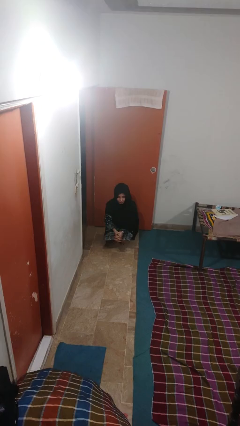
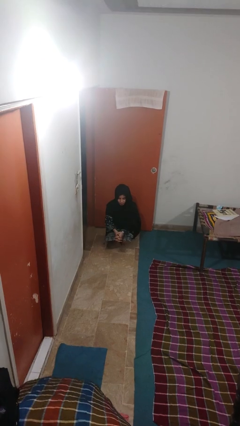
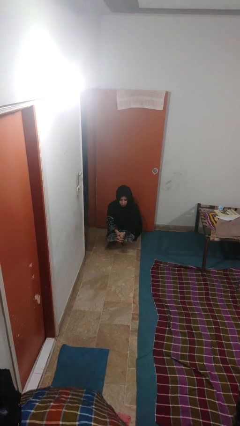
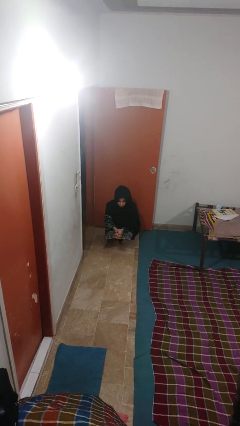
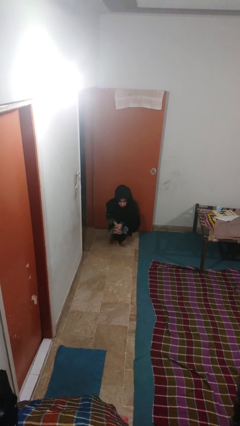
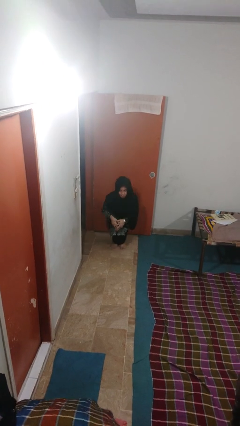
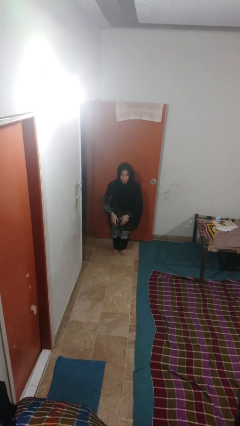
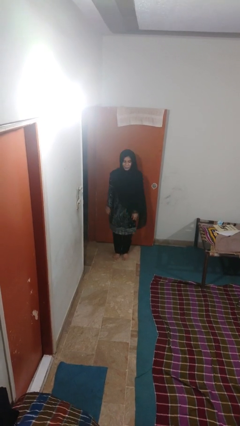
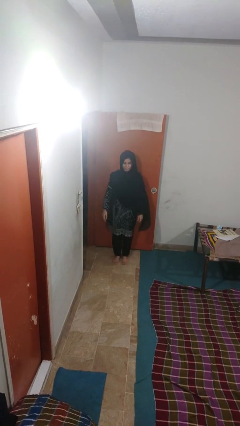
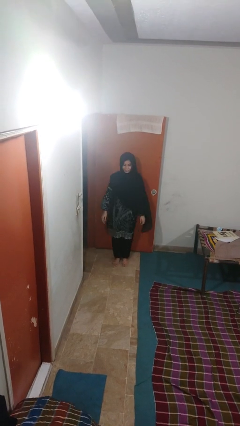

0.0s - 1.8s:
person stands up

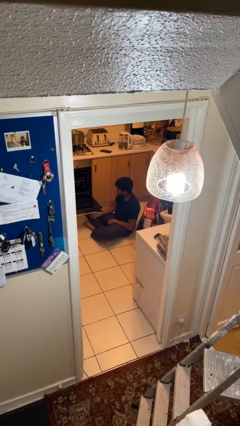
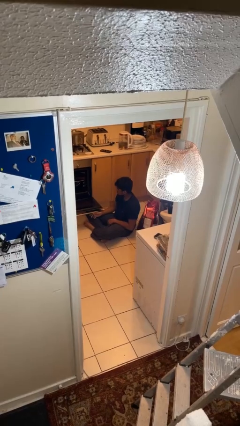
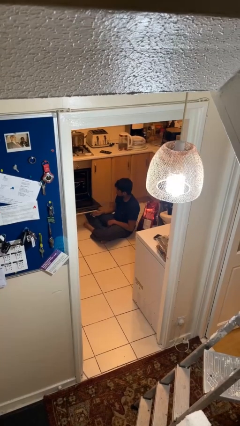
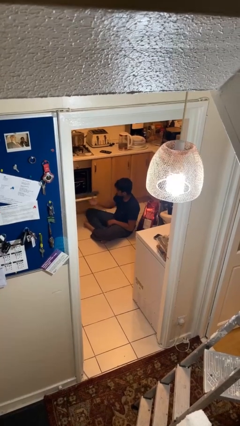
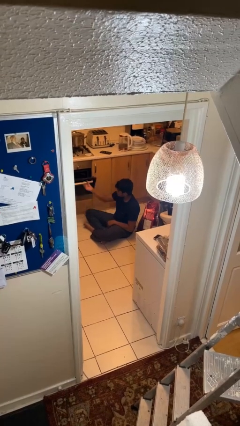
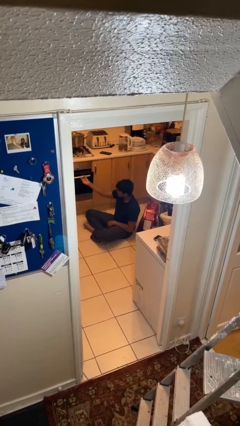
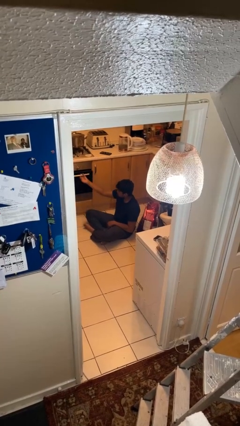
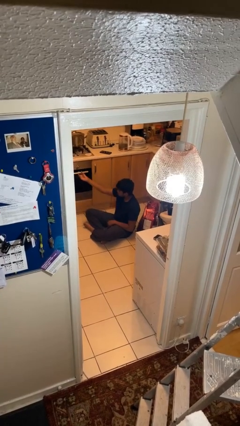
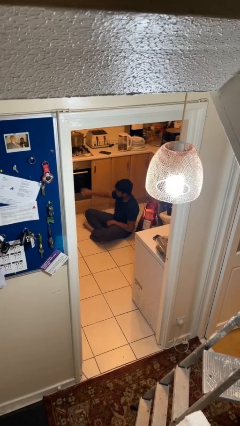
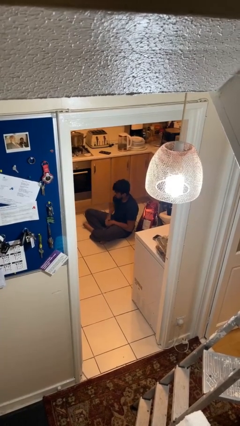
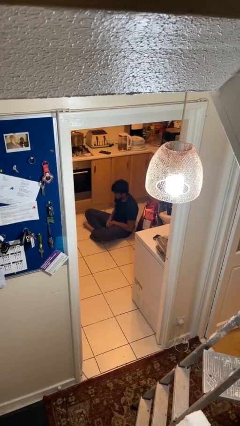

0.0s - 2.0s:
person closes oven door

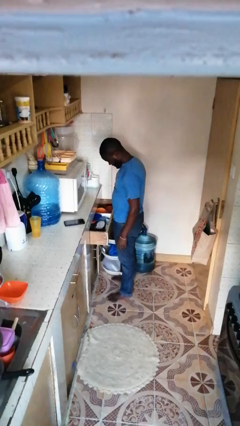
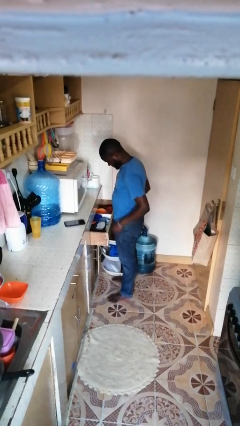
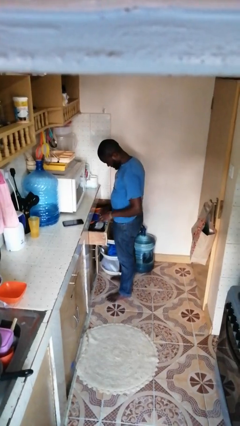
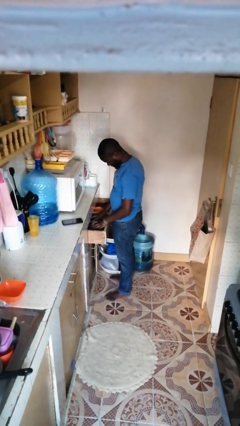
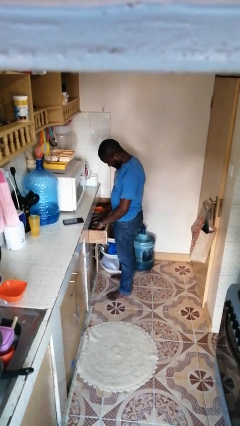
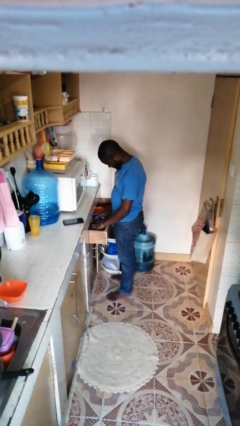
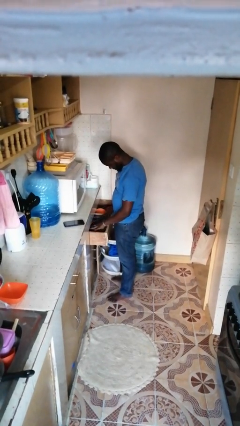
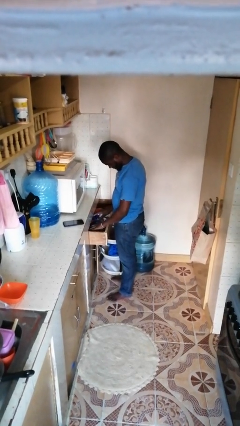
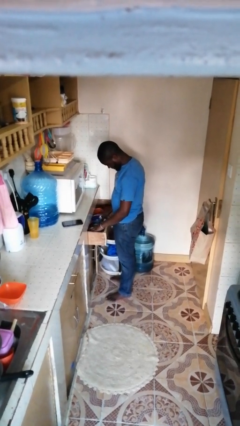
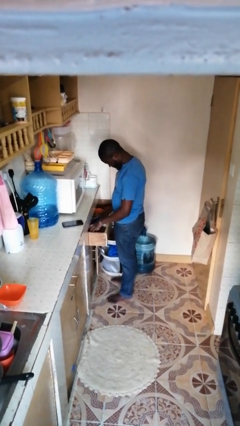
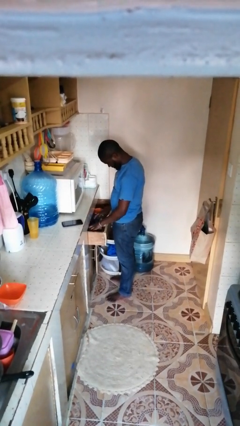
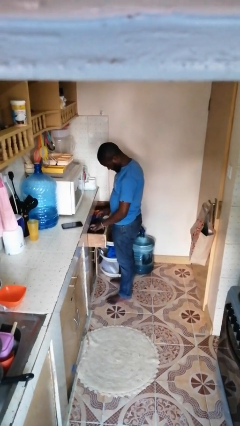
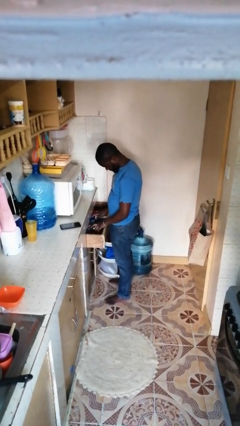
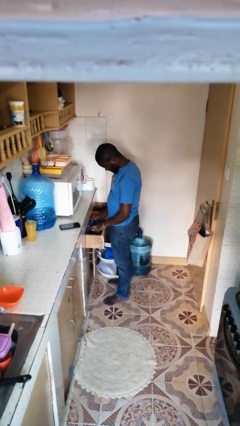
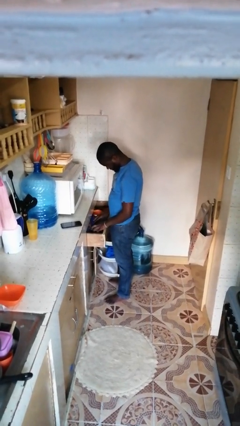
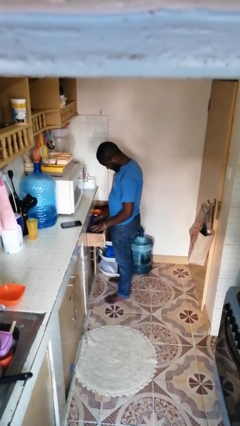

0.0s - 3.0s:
person searches in kitchen drawer

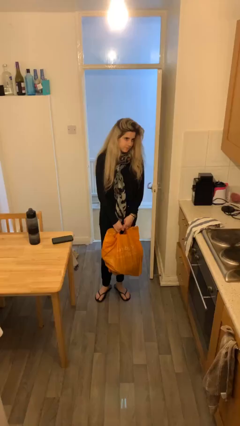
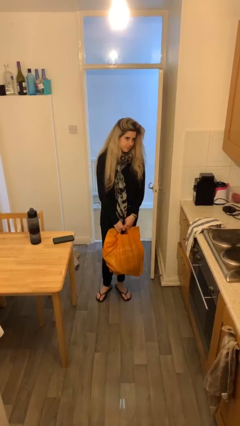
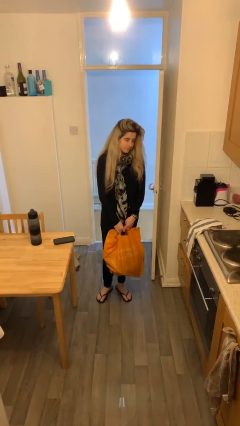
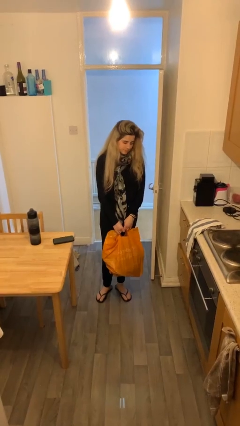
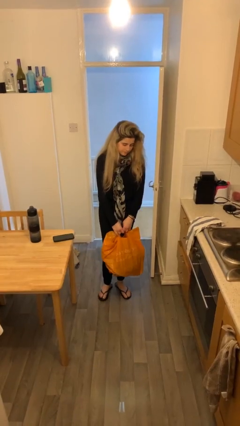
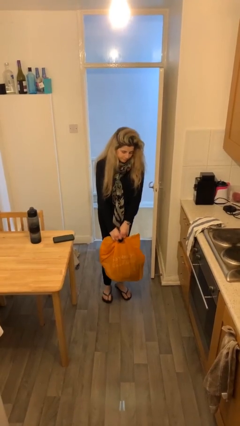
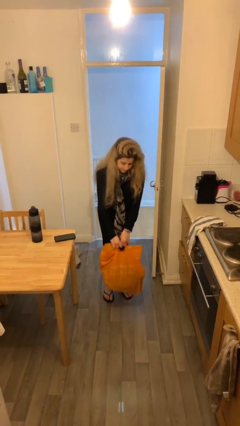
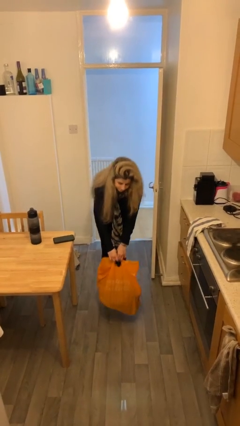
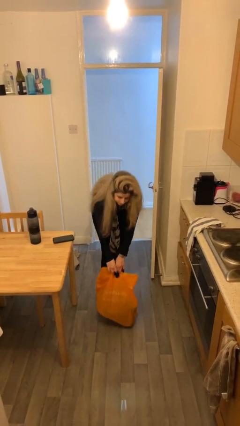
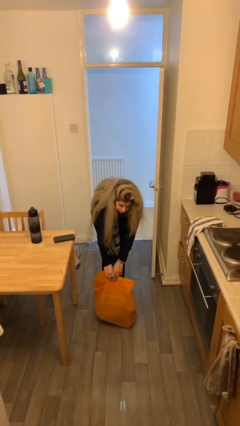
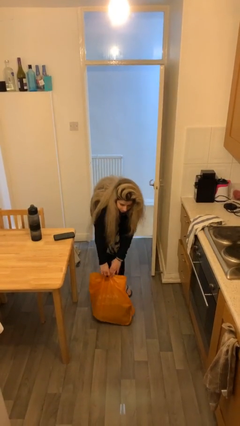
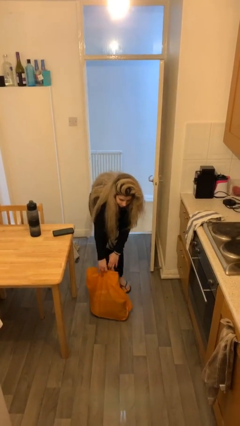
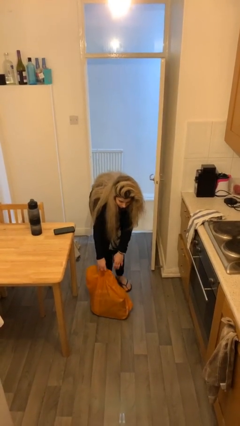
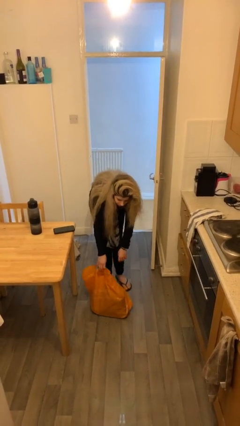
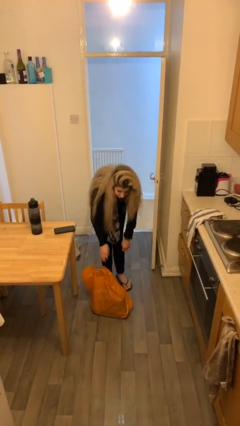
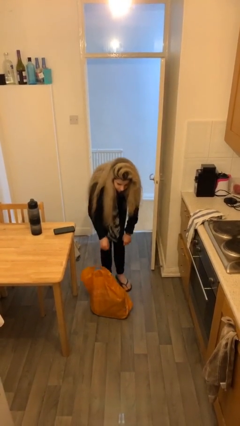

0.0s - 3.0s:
person puts down object on floor

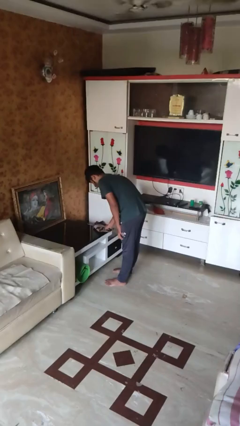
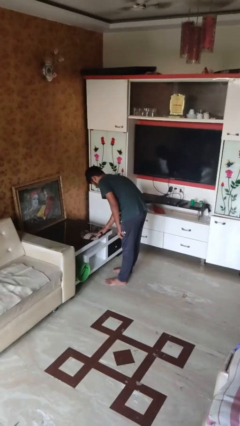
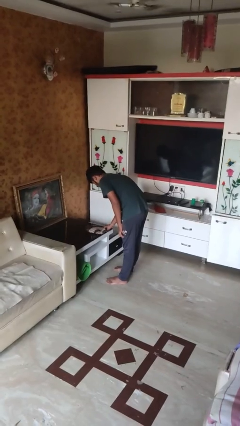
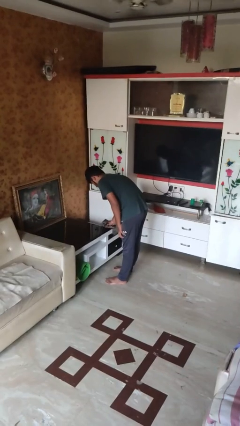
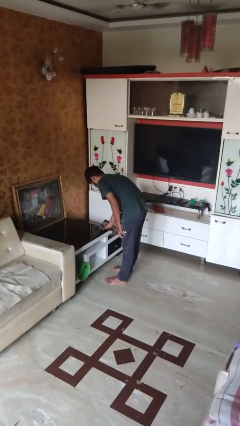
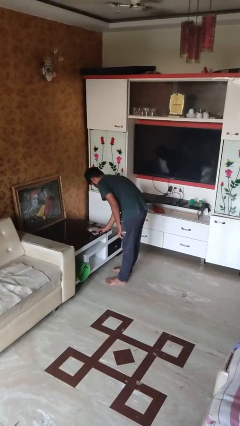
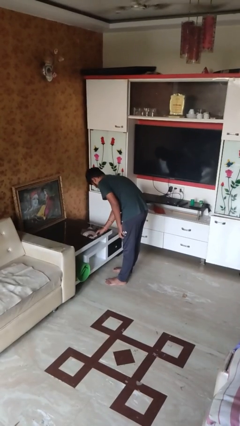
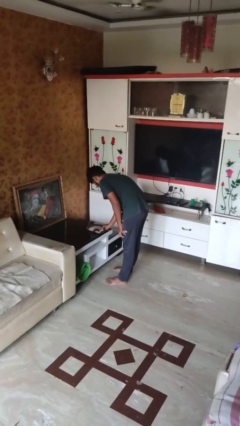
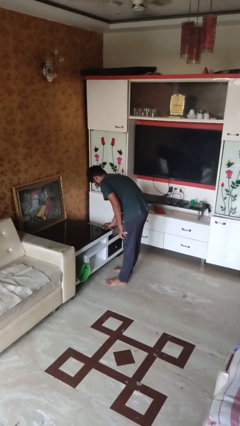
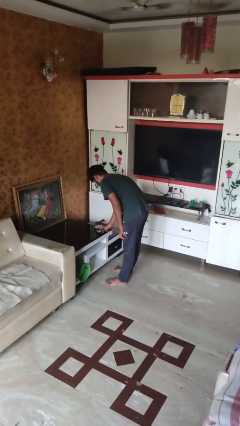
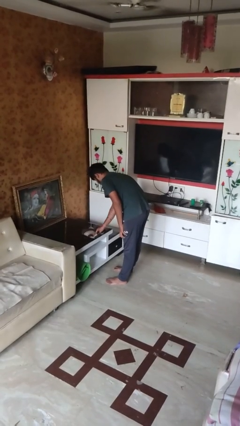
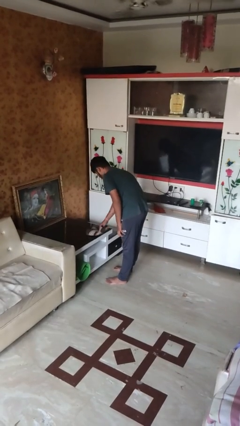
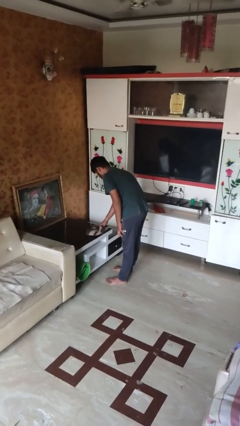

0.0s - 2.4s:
person cleans table with rag

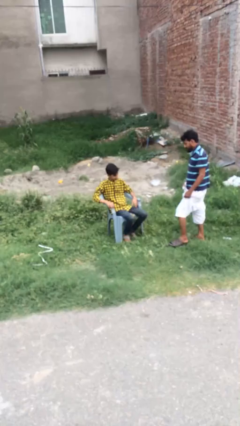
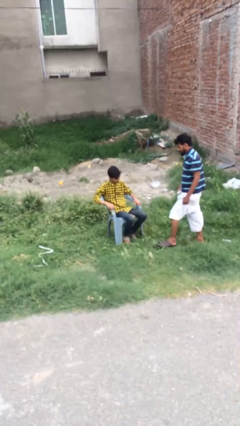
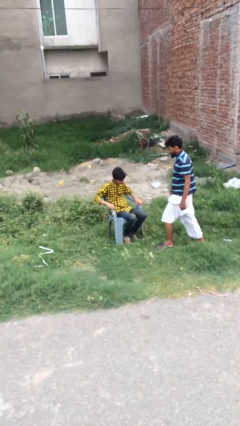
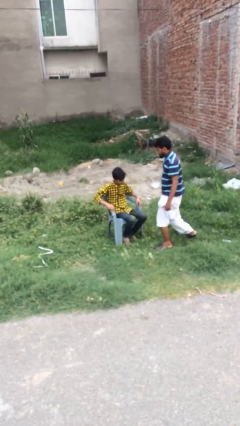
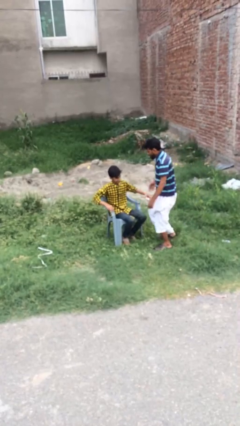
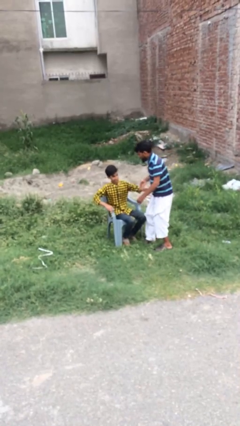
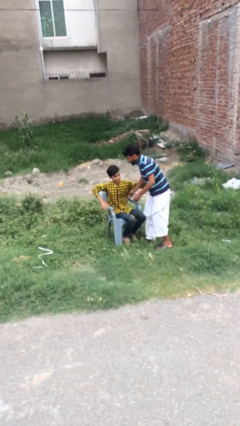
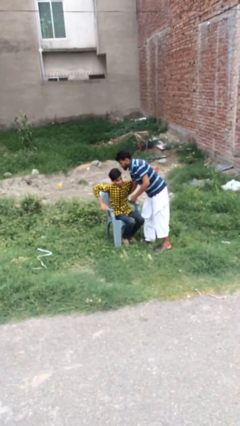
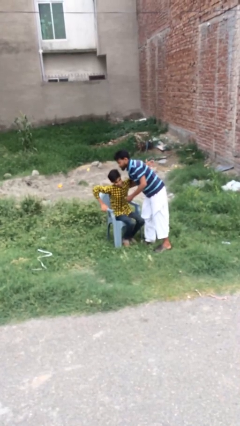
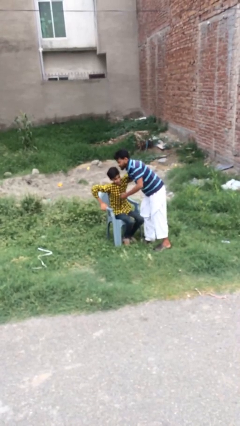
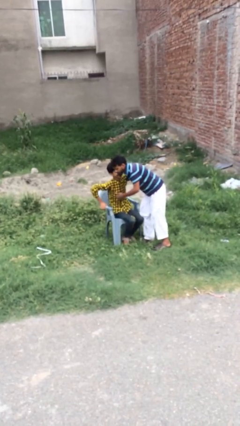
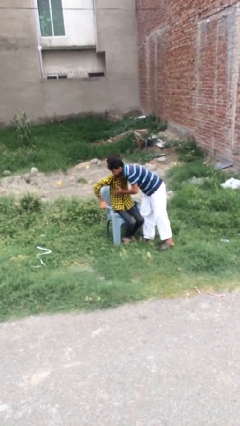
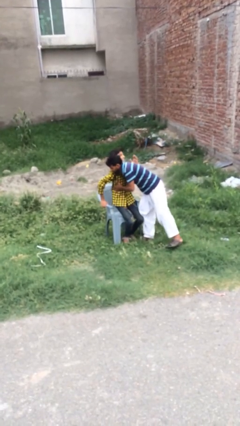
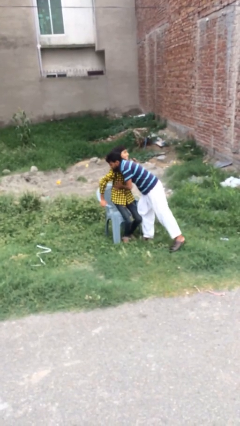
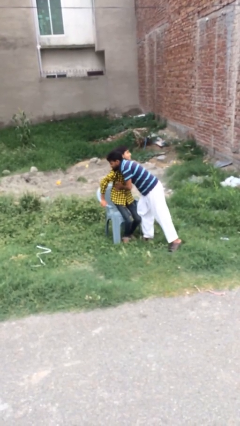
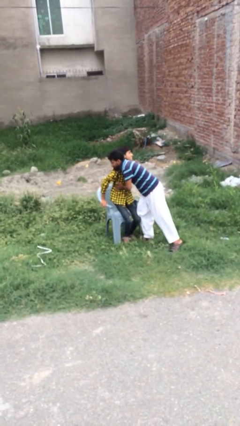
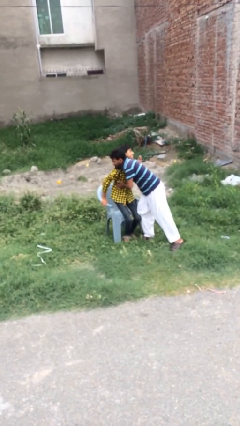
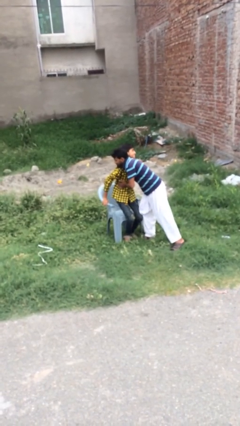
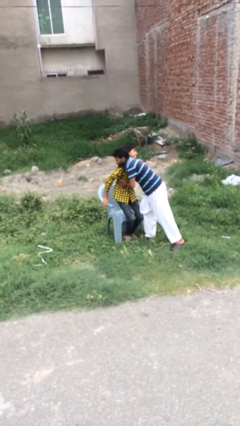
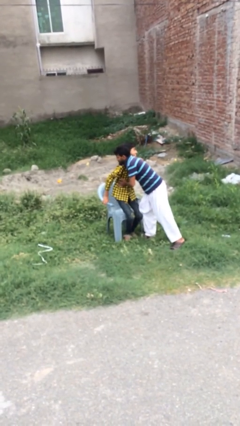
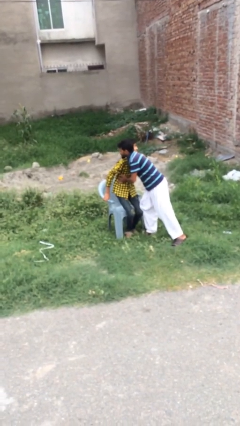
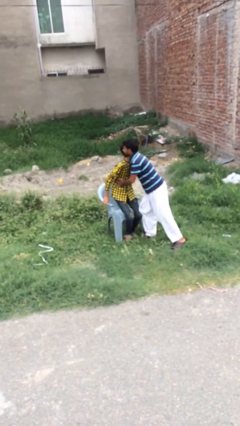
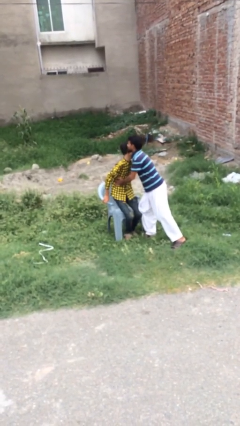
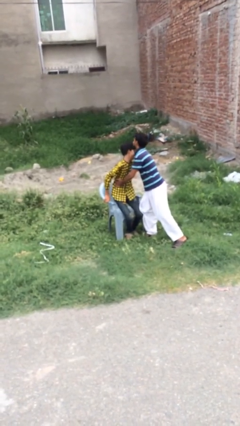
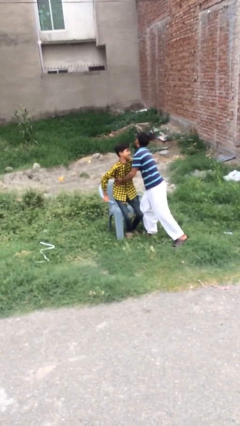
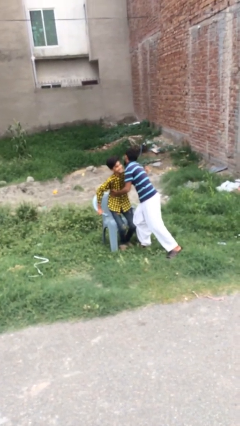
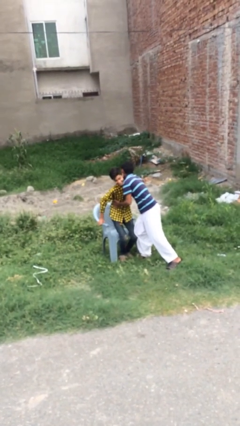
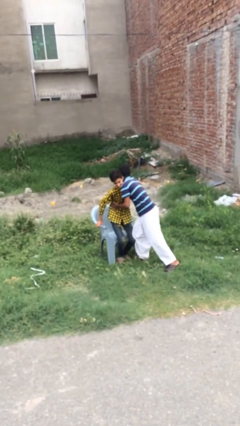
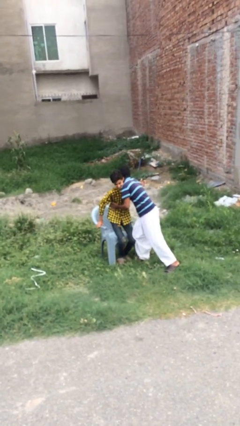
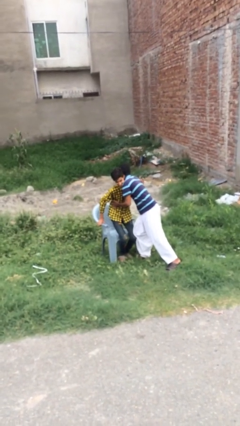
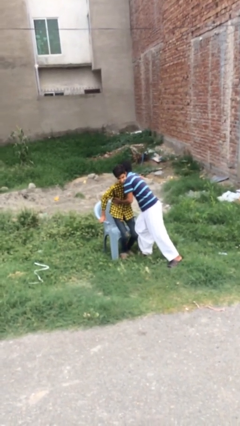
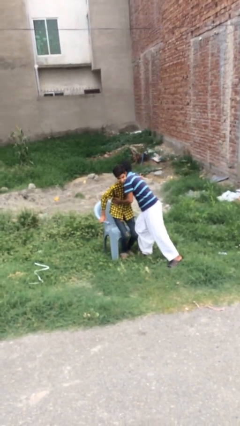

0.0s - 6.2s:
person embraces person
